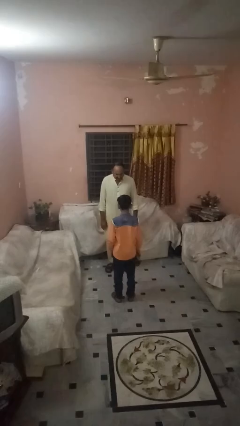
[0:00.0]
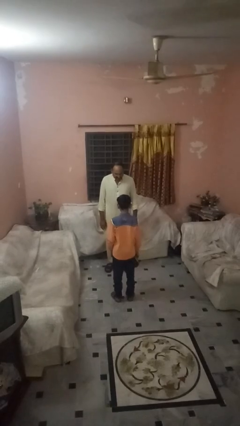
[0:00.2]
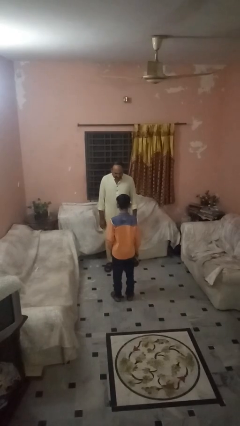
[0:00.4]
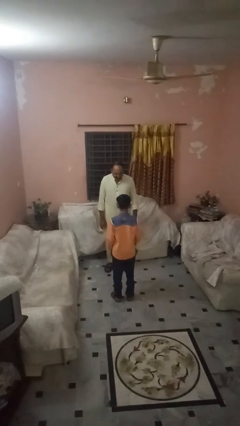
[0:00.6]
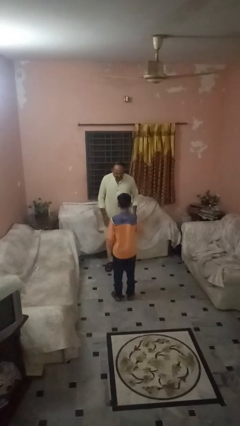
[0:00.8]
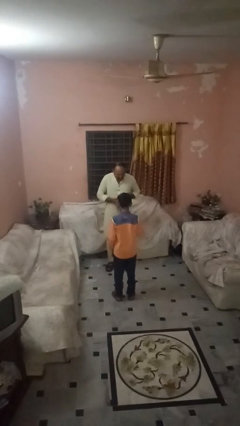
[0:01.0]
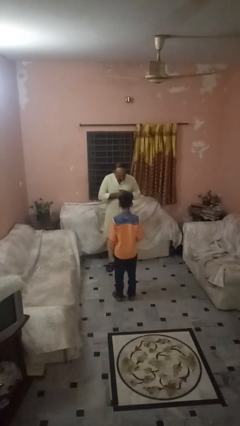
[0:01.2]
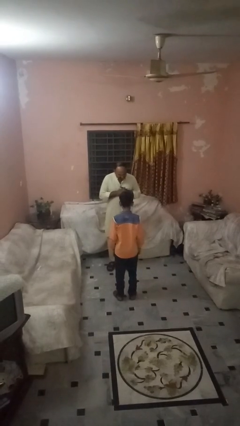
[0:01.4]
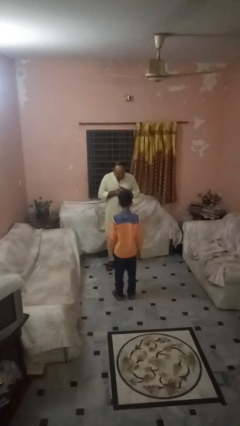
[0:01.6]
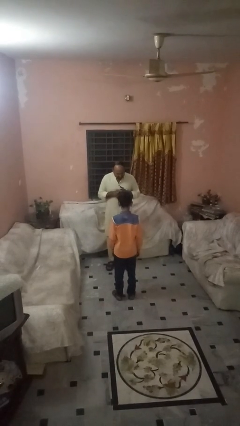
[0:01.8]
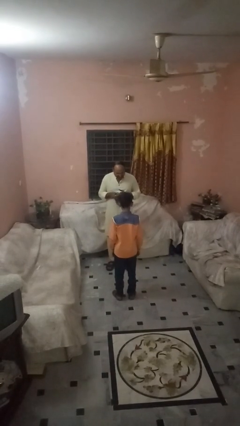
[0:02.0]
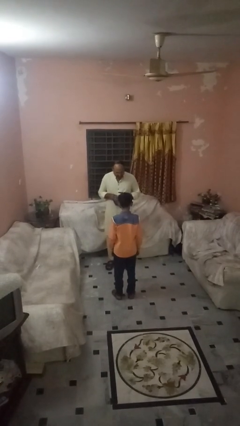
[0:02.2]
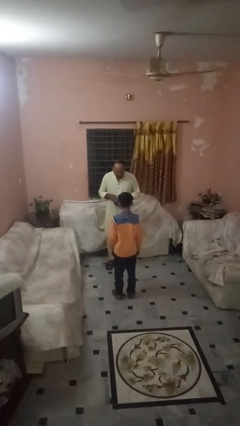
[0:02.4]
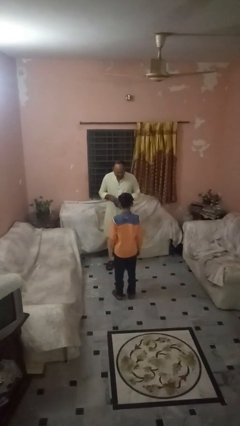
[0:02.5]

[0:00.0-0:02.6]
person catches object from person

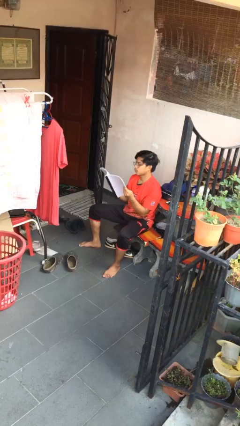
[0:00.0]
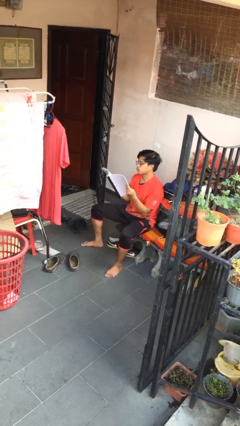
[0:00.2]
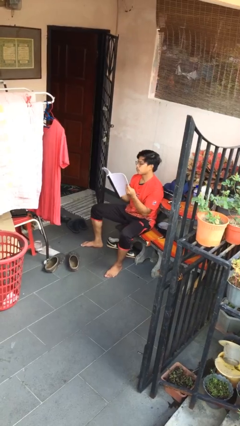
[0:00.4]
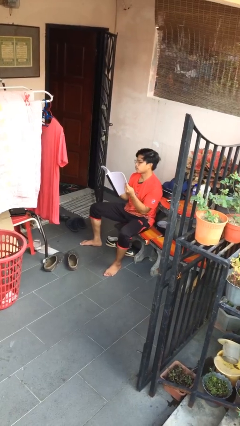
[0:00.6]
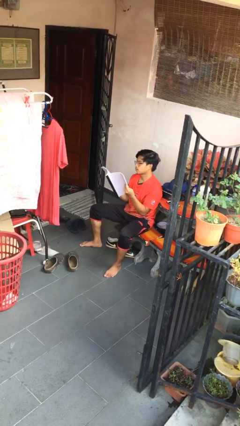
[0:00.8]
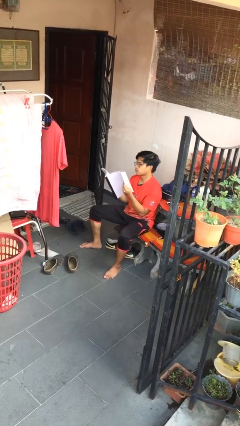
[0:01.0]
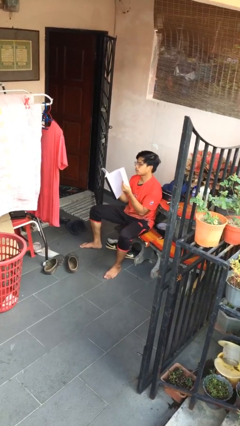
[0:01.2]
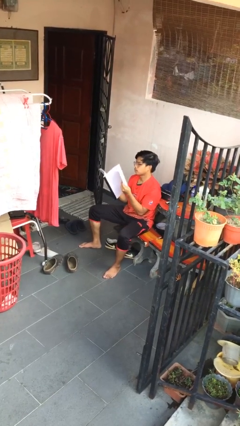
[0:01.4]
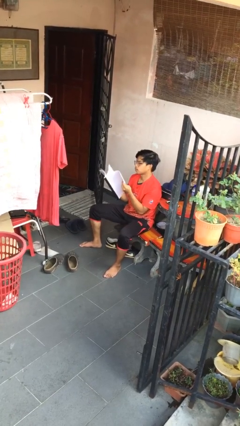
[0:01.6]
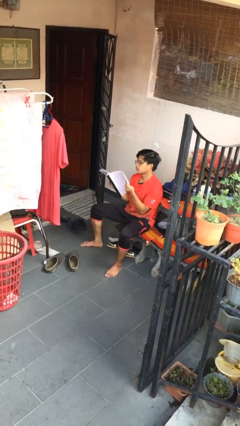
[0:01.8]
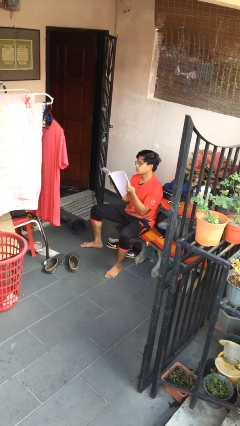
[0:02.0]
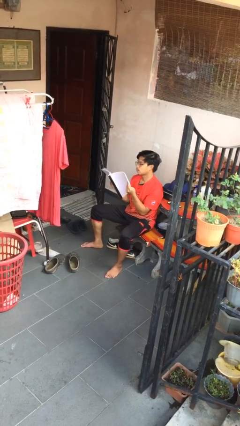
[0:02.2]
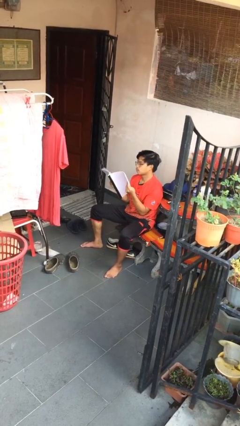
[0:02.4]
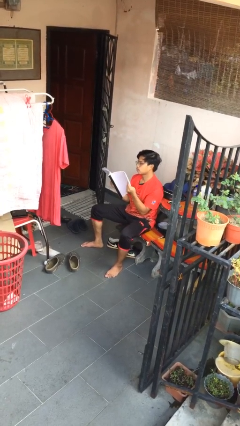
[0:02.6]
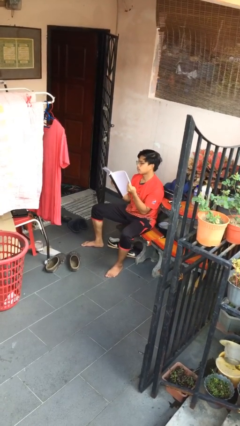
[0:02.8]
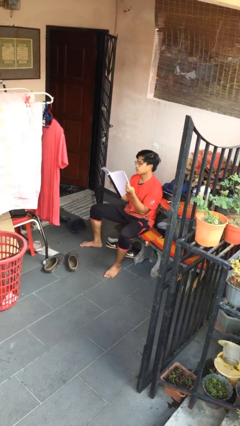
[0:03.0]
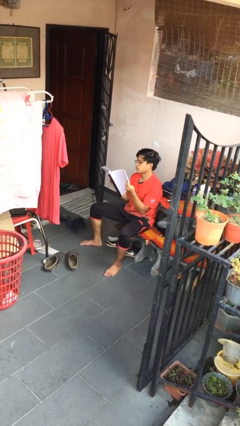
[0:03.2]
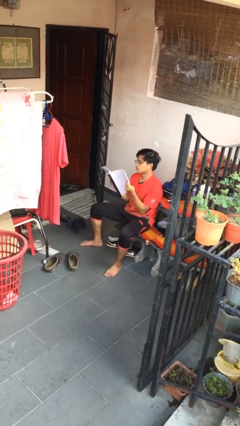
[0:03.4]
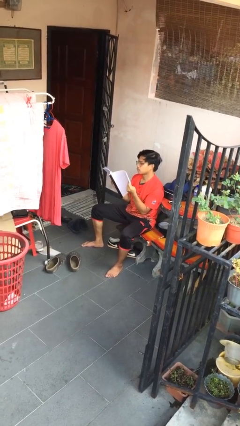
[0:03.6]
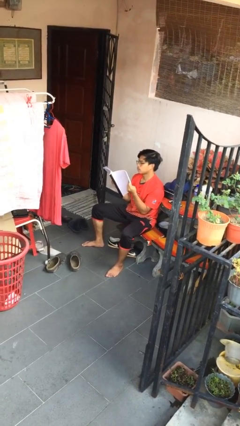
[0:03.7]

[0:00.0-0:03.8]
person reads document

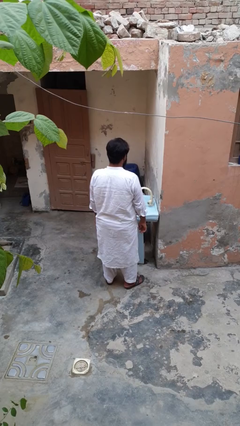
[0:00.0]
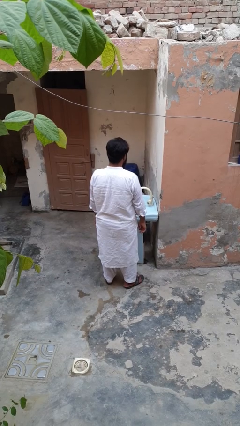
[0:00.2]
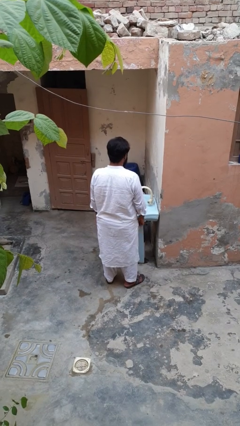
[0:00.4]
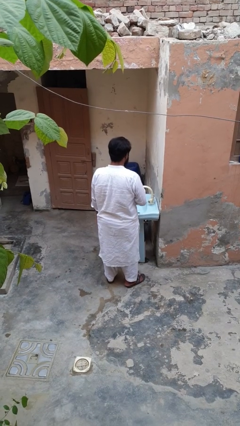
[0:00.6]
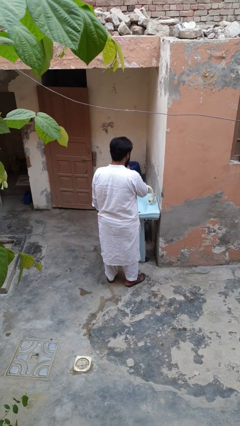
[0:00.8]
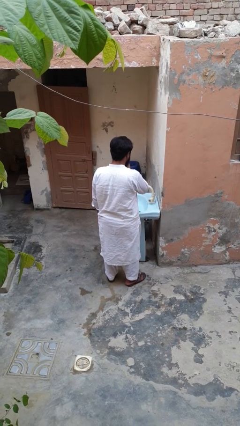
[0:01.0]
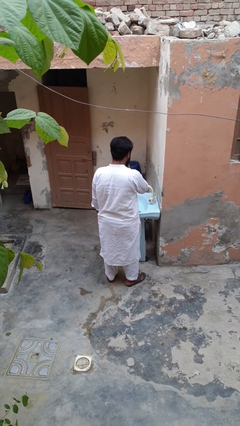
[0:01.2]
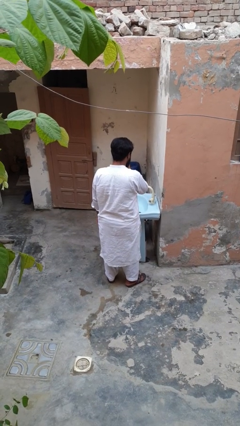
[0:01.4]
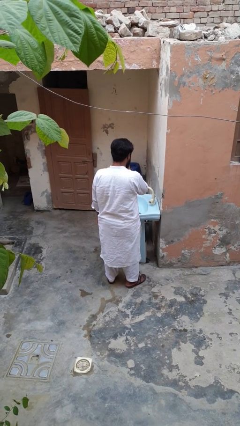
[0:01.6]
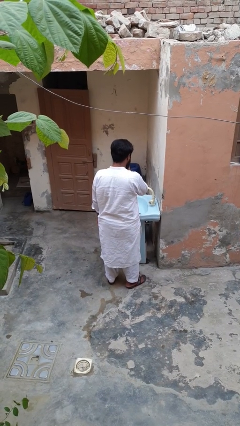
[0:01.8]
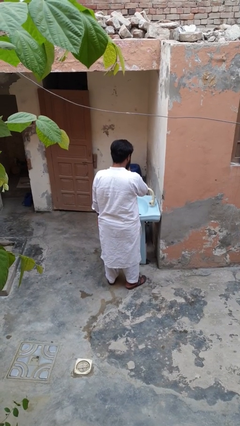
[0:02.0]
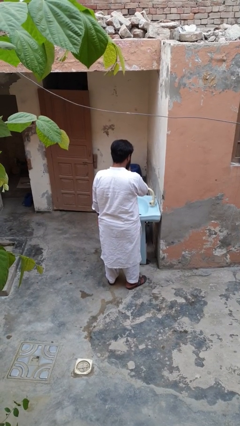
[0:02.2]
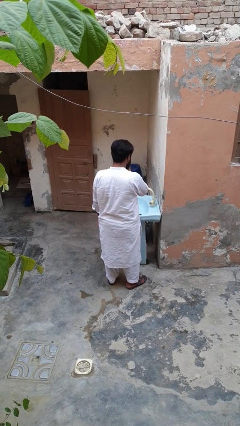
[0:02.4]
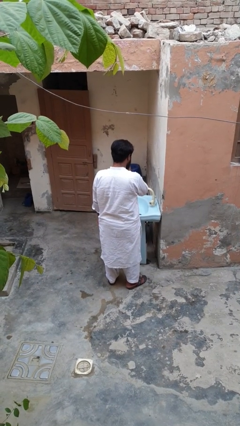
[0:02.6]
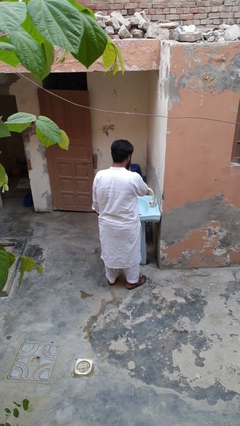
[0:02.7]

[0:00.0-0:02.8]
person flosses

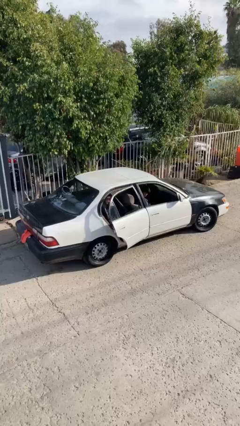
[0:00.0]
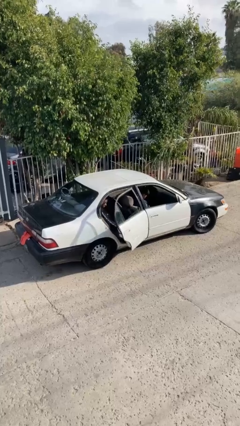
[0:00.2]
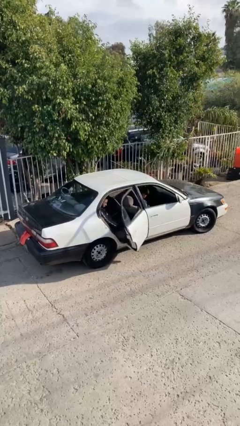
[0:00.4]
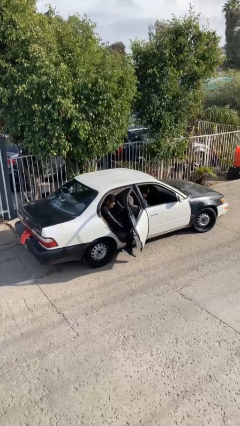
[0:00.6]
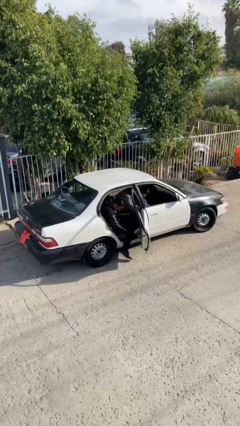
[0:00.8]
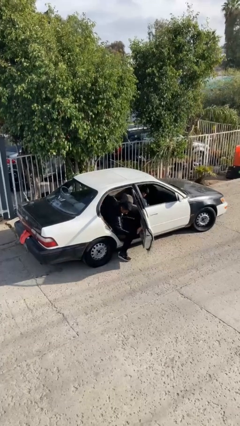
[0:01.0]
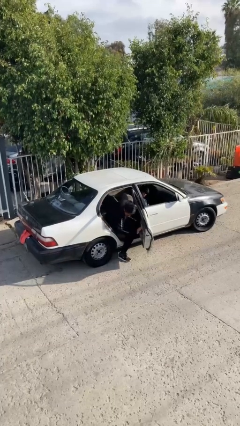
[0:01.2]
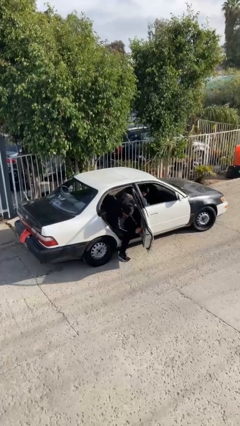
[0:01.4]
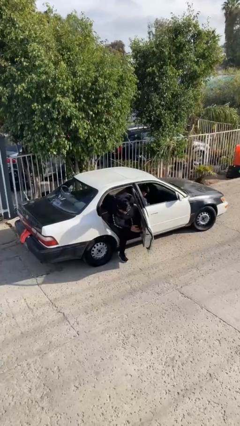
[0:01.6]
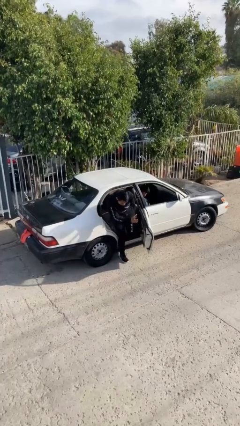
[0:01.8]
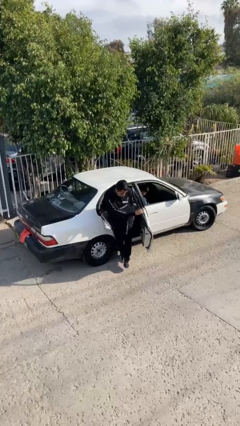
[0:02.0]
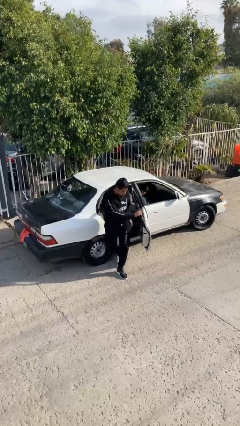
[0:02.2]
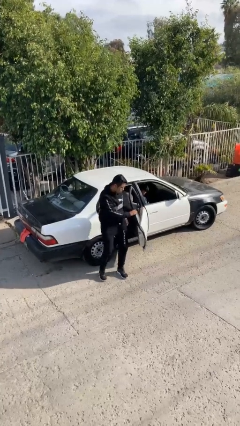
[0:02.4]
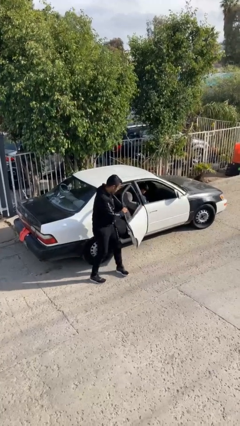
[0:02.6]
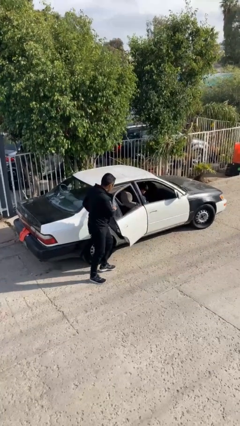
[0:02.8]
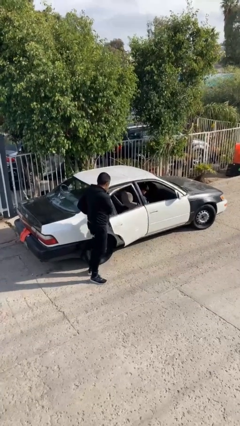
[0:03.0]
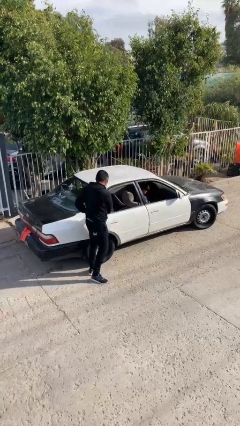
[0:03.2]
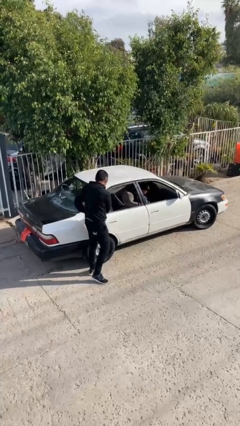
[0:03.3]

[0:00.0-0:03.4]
car drops off person

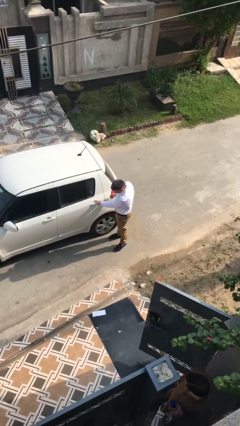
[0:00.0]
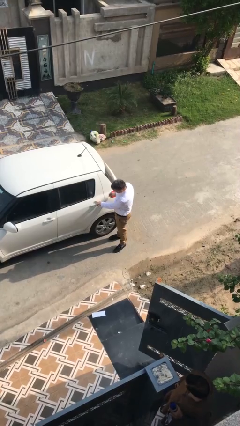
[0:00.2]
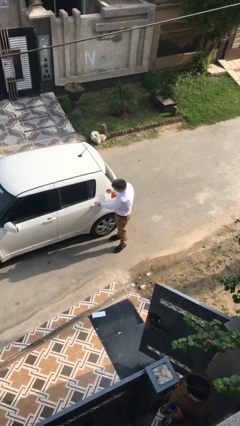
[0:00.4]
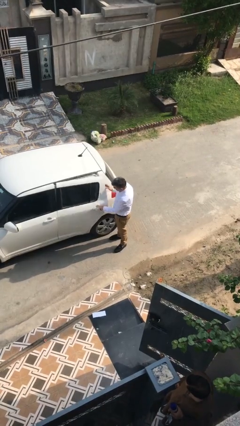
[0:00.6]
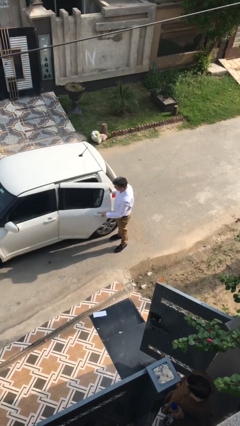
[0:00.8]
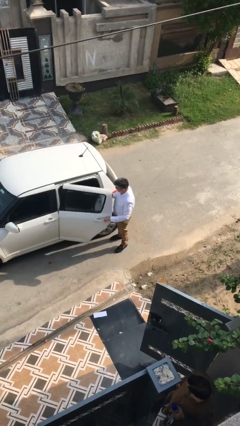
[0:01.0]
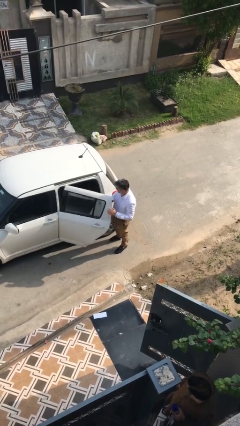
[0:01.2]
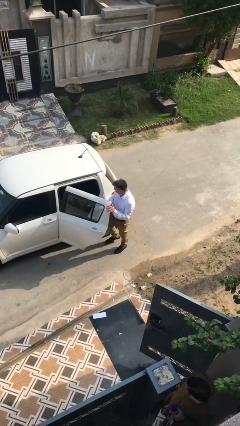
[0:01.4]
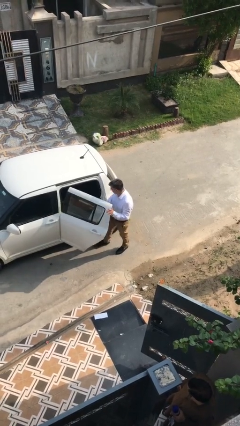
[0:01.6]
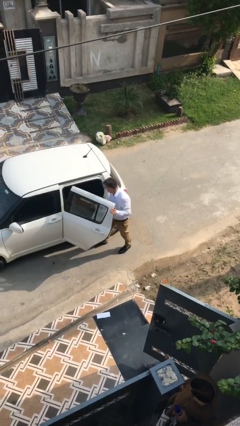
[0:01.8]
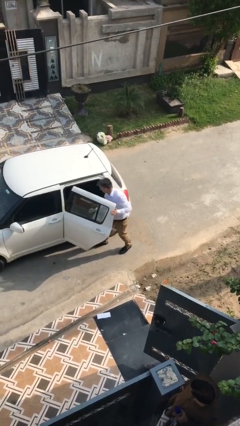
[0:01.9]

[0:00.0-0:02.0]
person opens car door

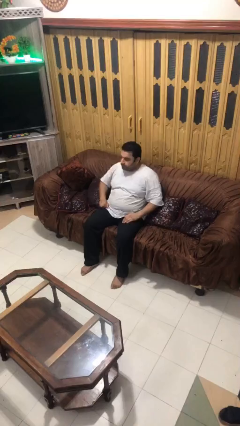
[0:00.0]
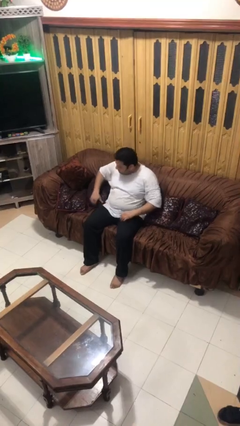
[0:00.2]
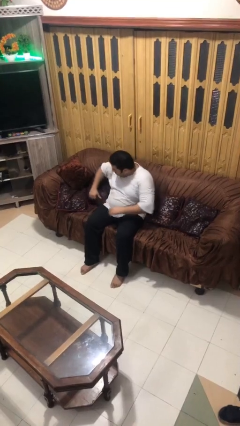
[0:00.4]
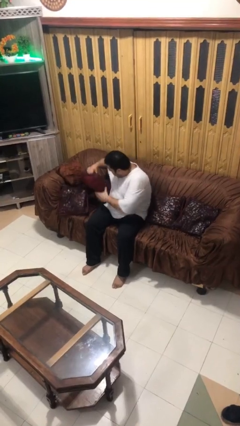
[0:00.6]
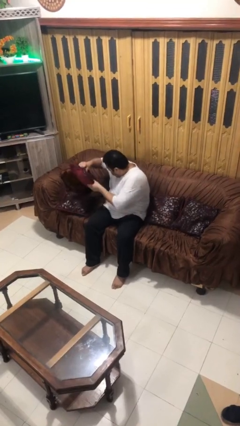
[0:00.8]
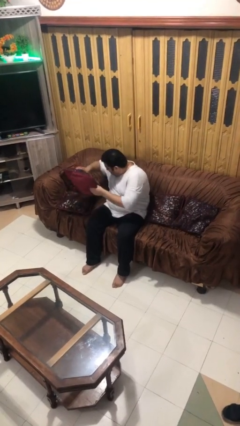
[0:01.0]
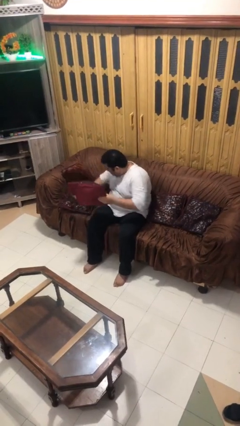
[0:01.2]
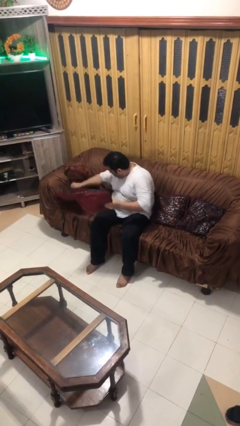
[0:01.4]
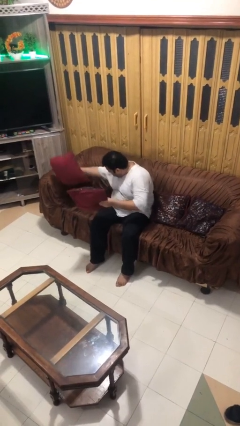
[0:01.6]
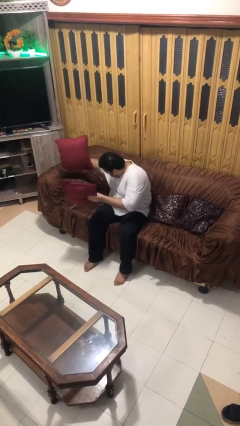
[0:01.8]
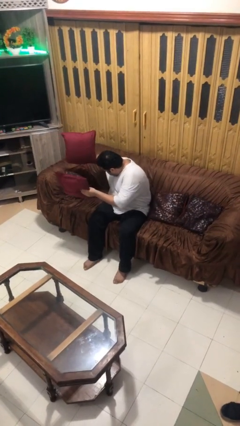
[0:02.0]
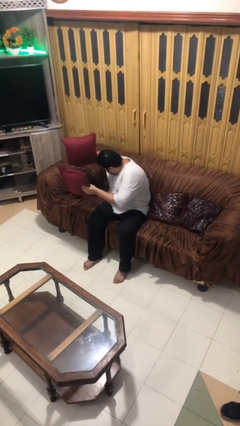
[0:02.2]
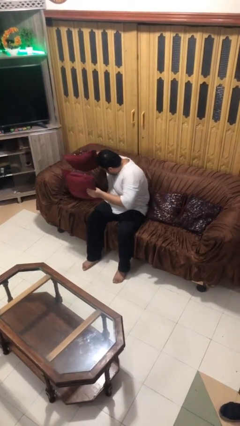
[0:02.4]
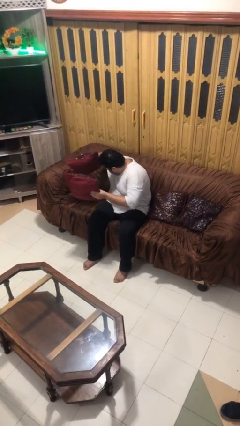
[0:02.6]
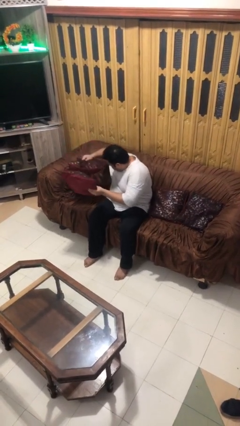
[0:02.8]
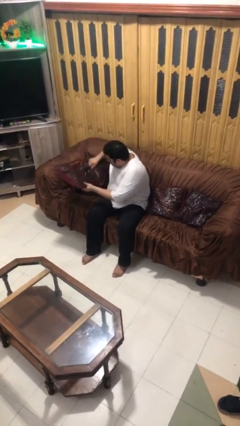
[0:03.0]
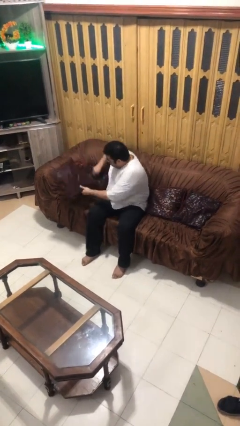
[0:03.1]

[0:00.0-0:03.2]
person searches in couch
